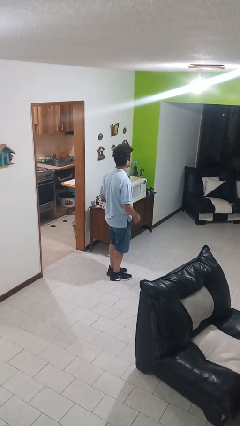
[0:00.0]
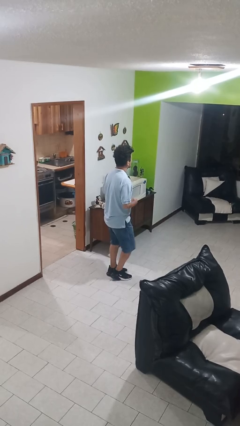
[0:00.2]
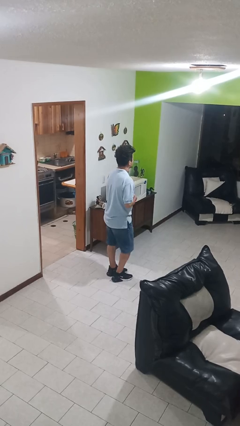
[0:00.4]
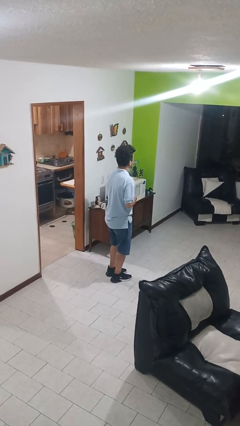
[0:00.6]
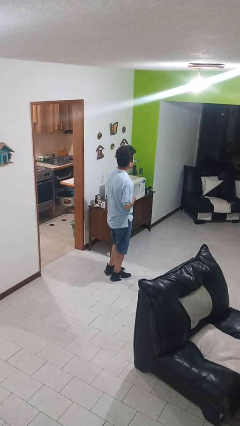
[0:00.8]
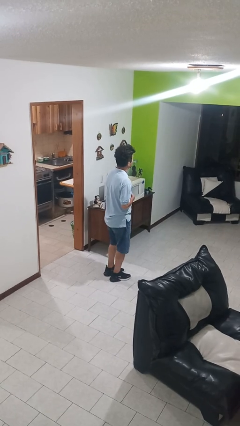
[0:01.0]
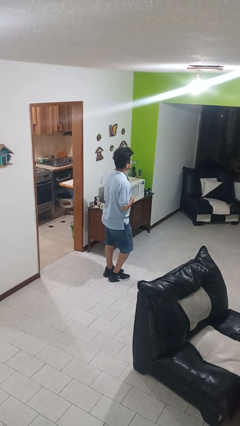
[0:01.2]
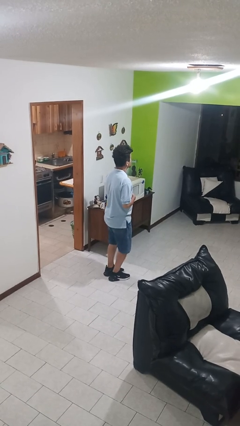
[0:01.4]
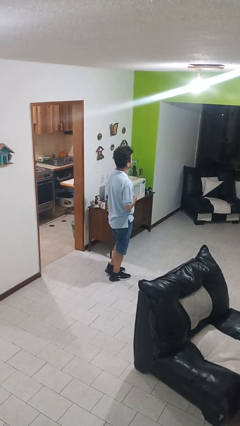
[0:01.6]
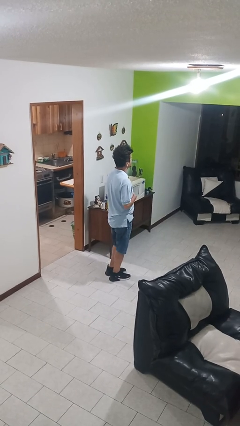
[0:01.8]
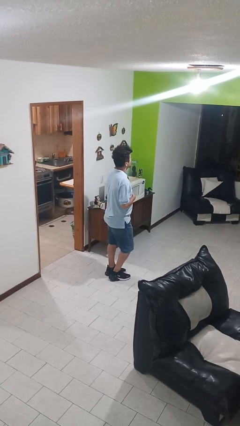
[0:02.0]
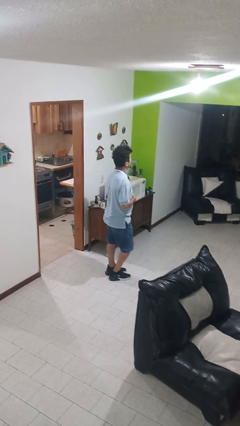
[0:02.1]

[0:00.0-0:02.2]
person dances in place

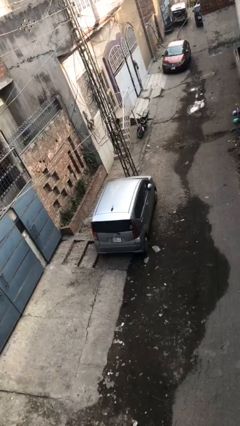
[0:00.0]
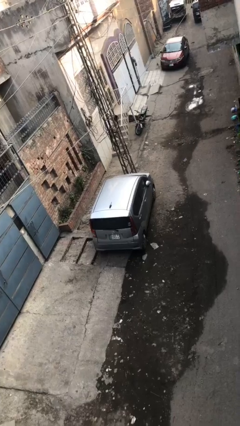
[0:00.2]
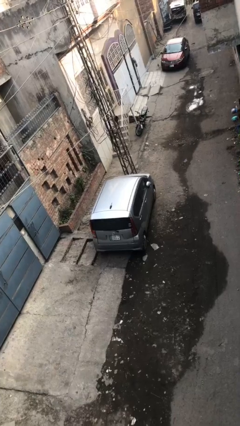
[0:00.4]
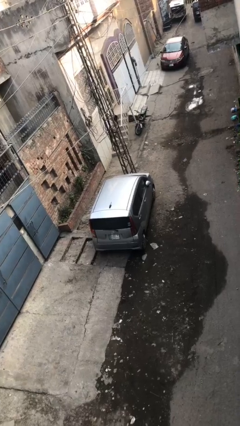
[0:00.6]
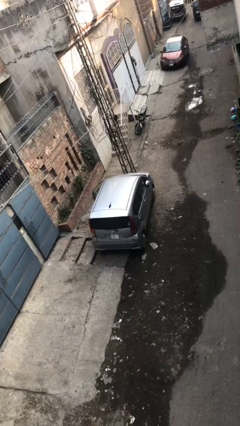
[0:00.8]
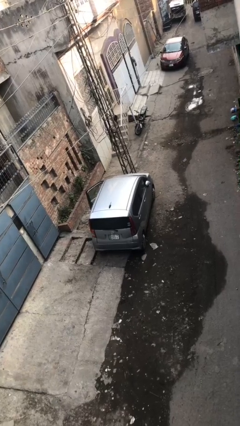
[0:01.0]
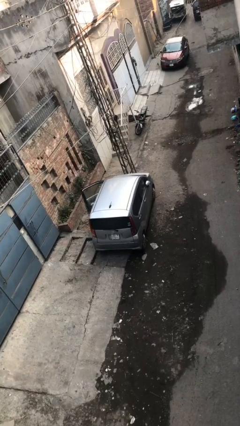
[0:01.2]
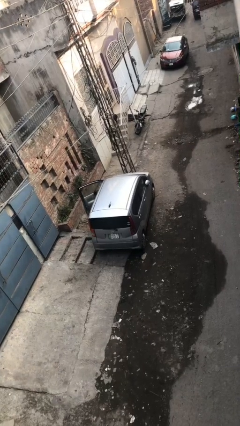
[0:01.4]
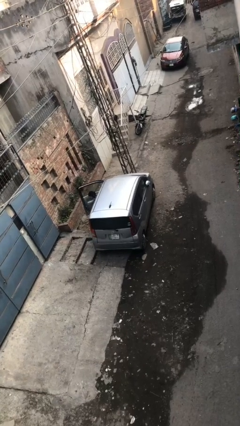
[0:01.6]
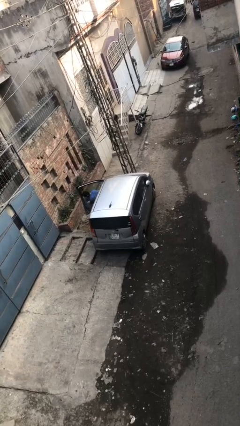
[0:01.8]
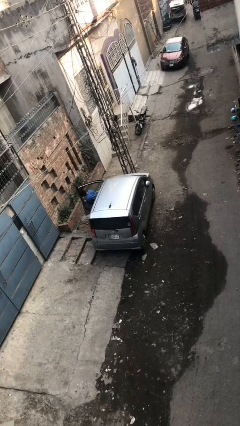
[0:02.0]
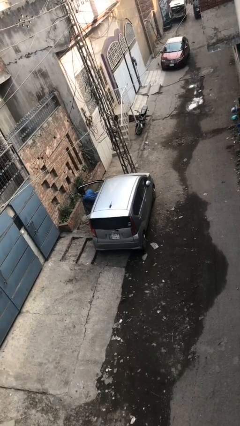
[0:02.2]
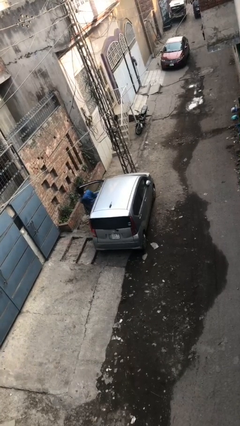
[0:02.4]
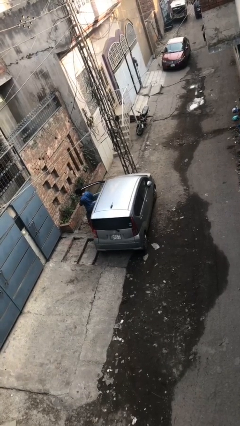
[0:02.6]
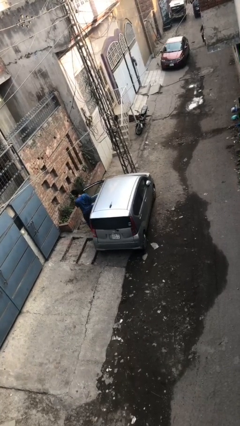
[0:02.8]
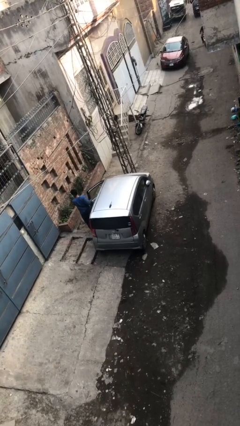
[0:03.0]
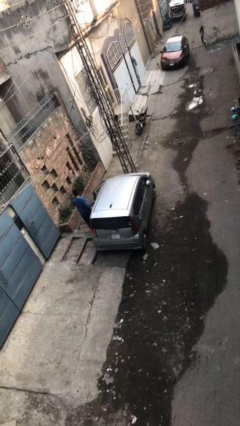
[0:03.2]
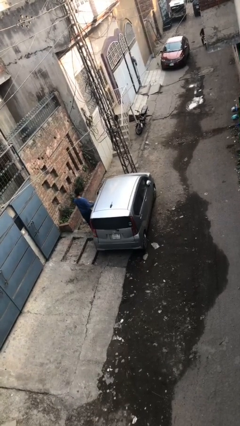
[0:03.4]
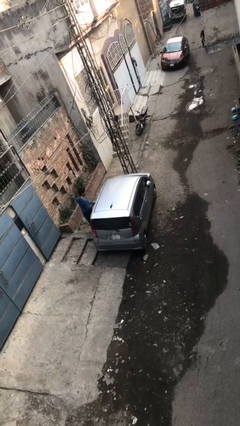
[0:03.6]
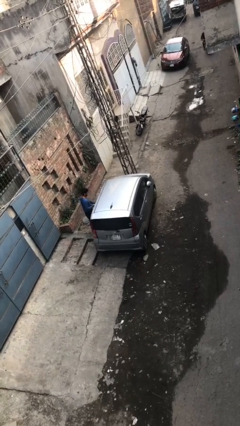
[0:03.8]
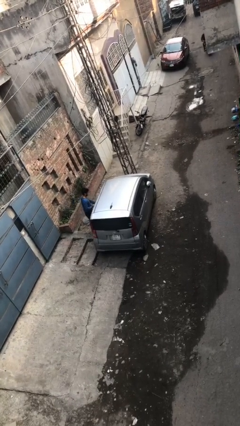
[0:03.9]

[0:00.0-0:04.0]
car drops off person

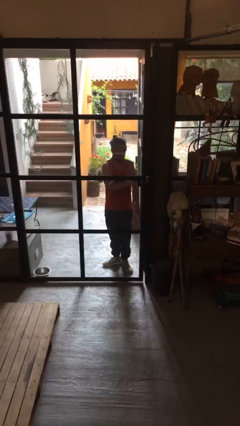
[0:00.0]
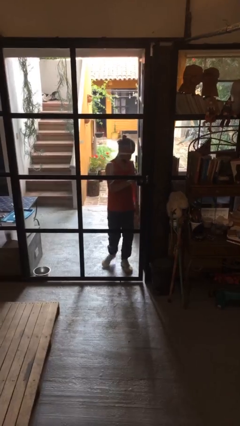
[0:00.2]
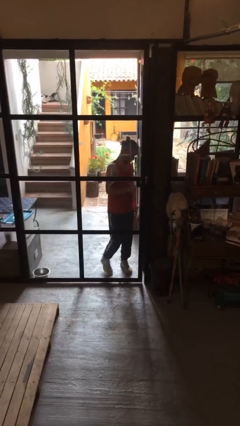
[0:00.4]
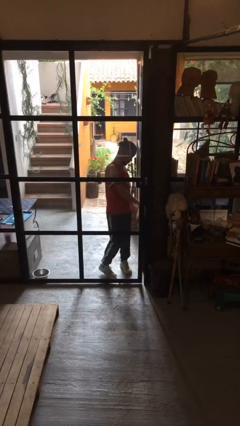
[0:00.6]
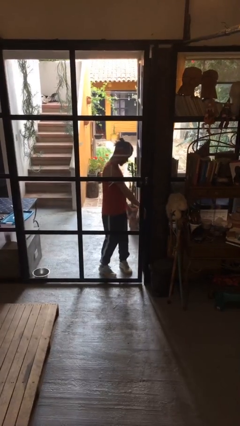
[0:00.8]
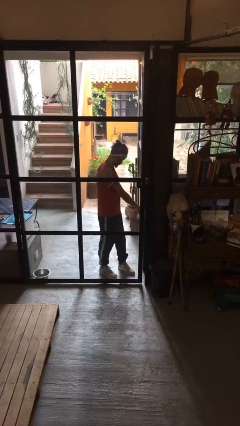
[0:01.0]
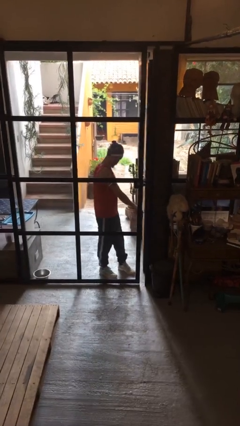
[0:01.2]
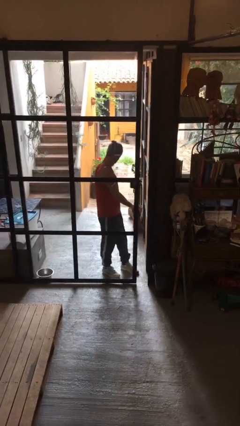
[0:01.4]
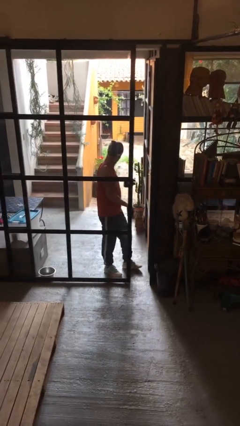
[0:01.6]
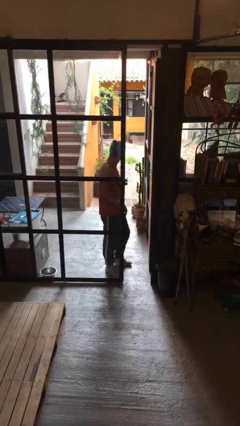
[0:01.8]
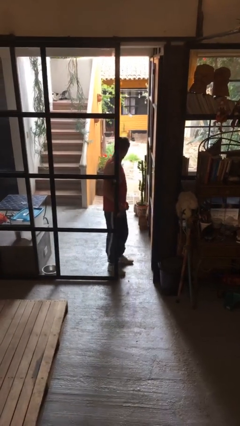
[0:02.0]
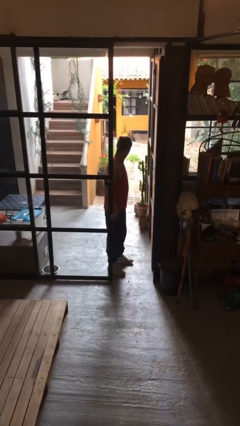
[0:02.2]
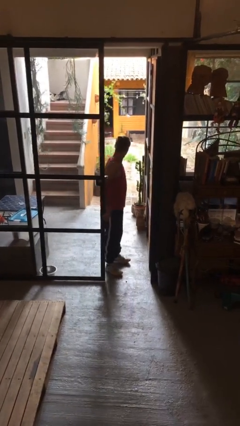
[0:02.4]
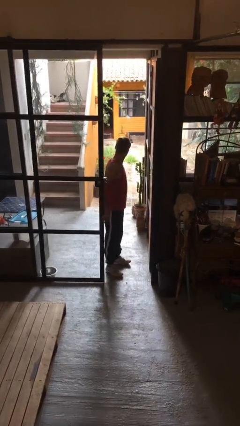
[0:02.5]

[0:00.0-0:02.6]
person opens sliding door

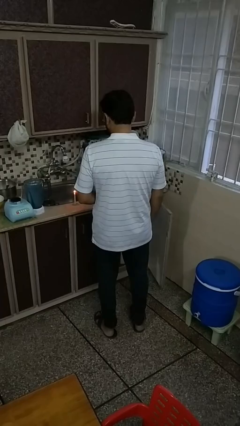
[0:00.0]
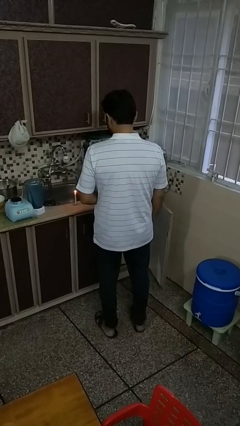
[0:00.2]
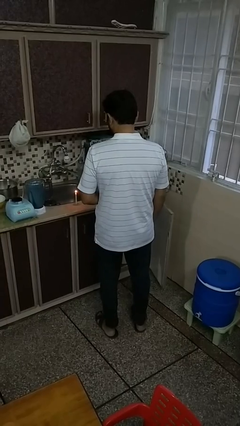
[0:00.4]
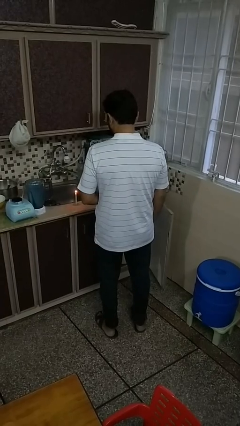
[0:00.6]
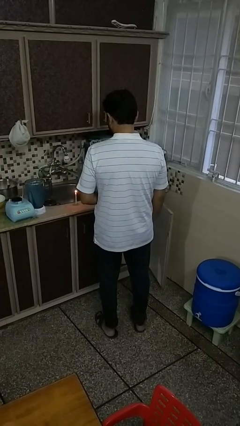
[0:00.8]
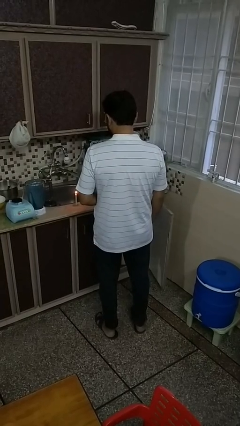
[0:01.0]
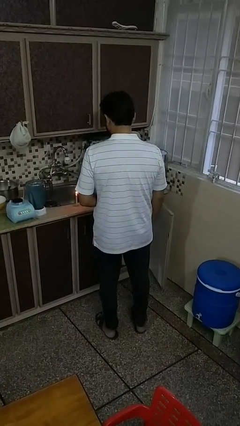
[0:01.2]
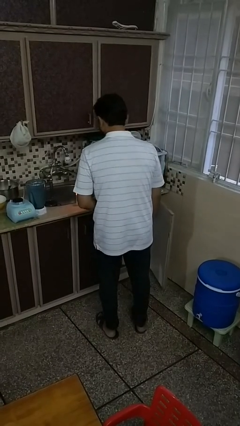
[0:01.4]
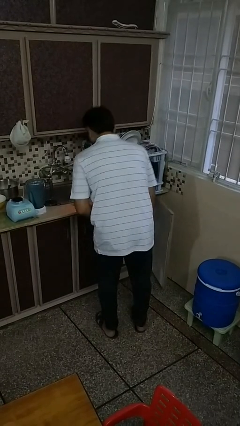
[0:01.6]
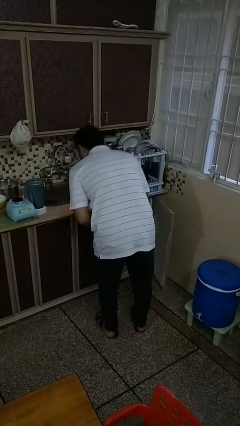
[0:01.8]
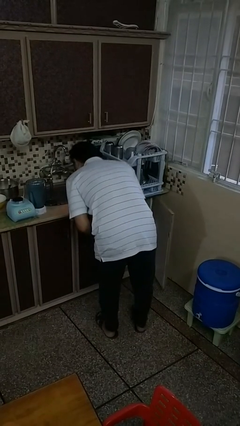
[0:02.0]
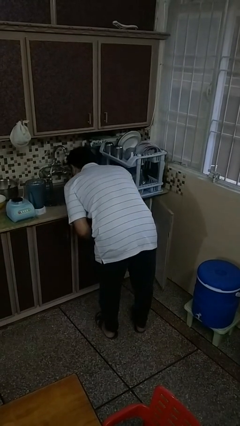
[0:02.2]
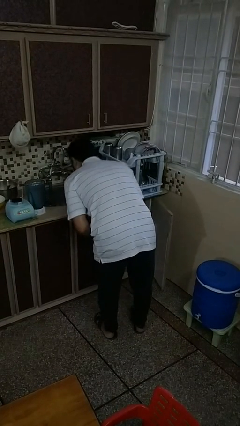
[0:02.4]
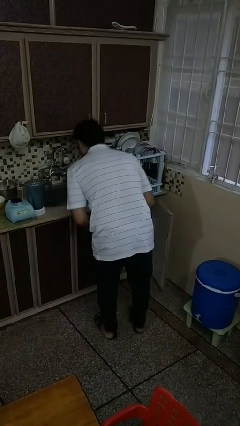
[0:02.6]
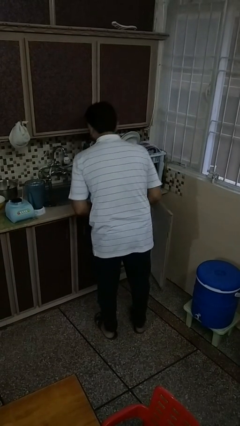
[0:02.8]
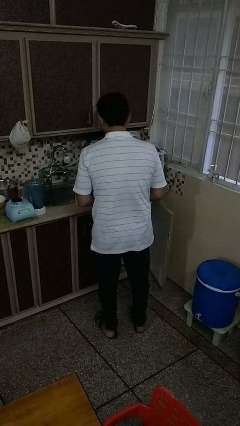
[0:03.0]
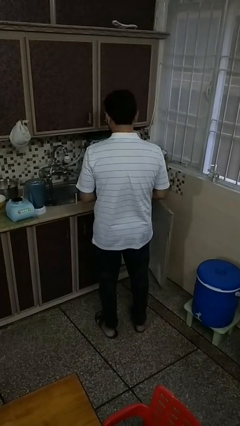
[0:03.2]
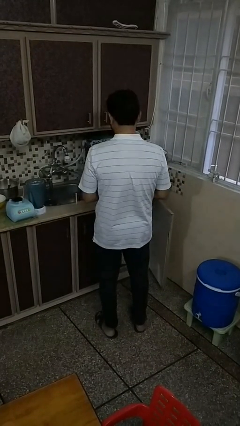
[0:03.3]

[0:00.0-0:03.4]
person extinguishes candle

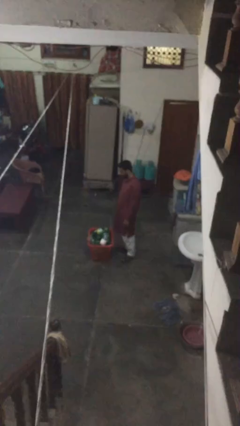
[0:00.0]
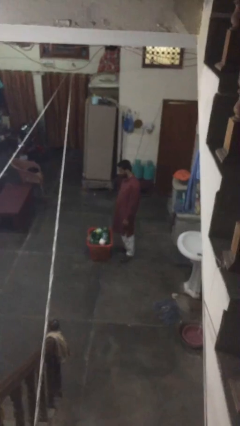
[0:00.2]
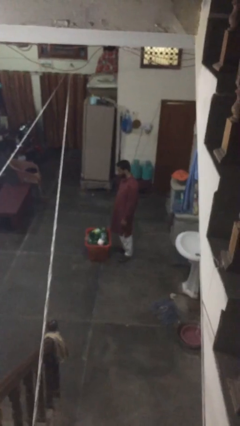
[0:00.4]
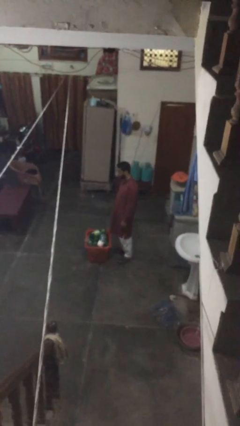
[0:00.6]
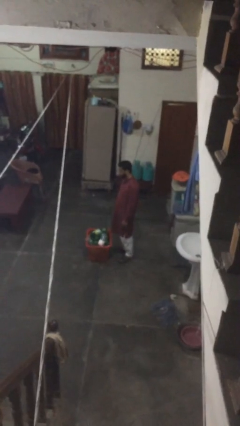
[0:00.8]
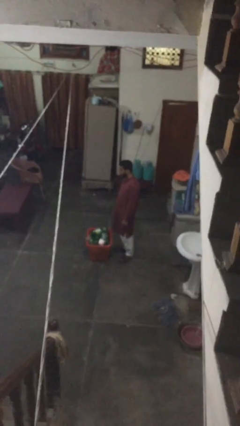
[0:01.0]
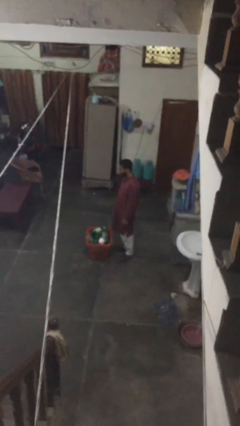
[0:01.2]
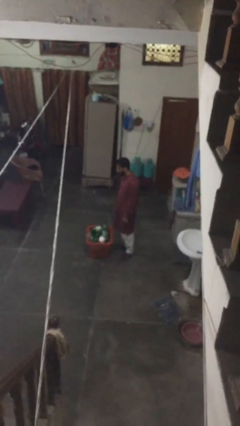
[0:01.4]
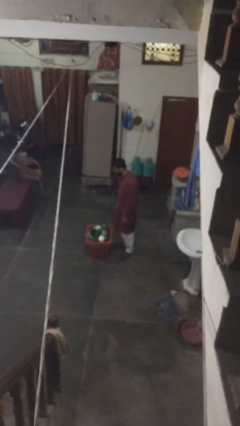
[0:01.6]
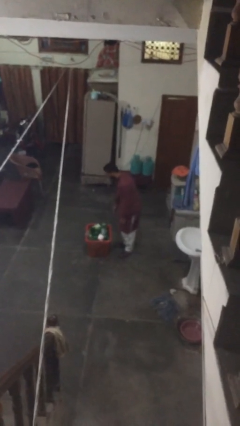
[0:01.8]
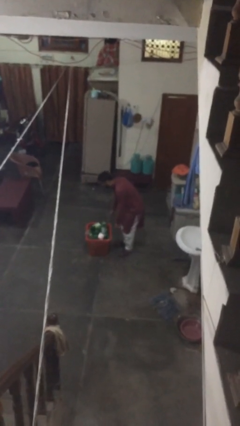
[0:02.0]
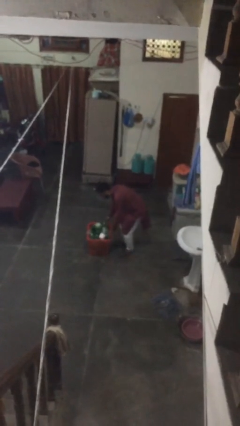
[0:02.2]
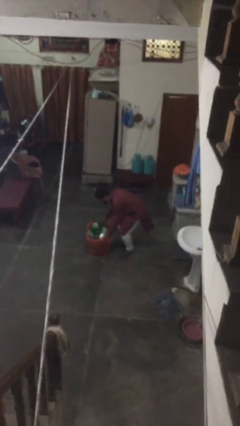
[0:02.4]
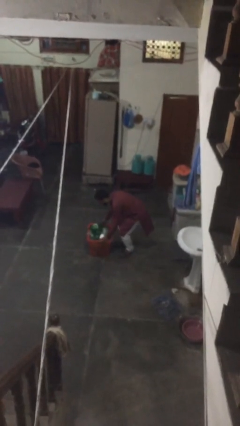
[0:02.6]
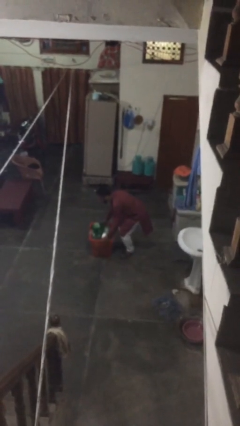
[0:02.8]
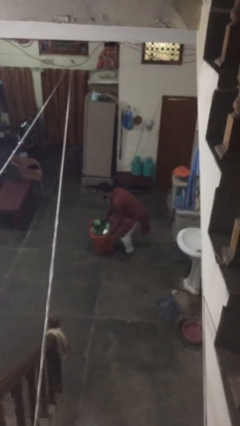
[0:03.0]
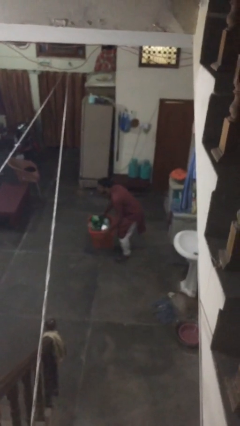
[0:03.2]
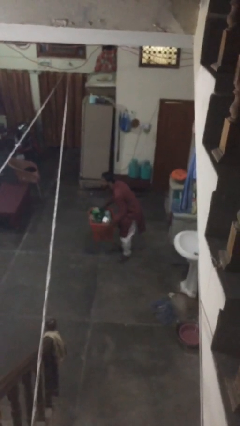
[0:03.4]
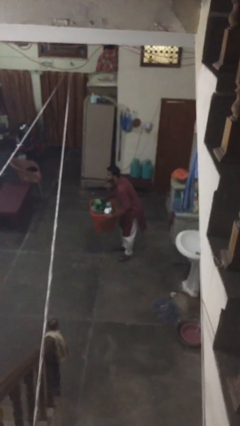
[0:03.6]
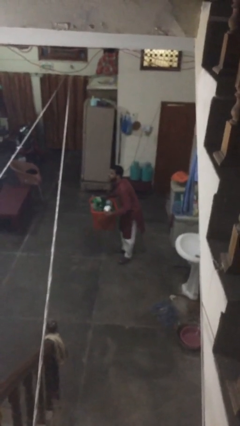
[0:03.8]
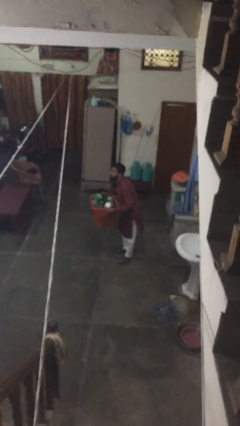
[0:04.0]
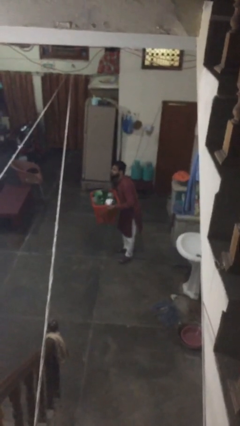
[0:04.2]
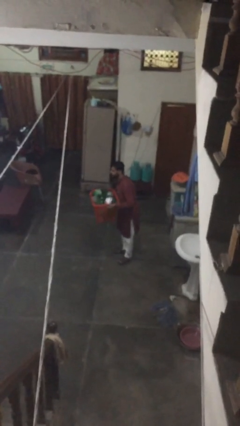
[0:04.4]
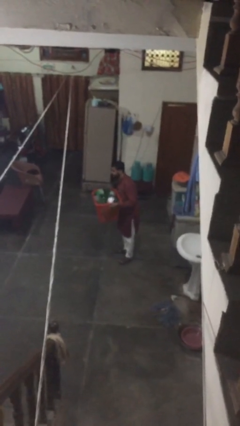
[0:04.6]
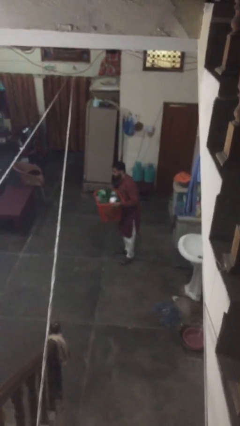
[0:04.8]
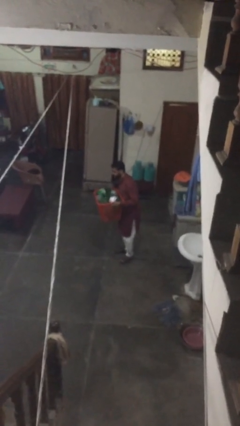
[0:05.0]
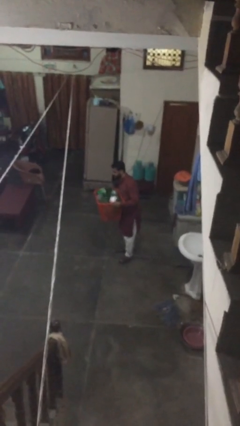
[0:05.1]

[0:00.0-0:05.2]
person picks up object from floor
